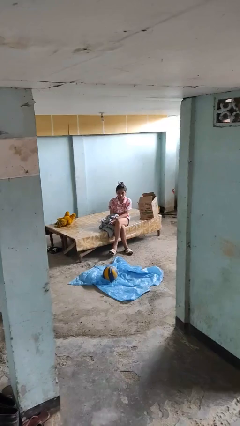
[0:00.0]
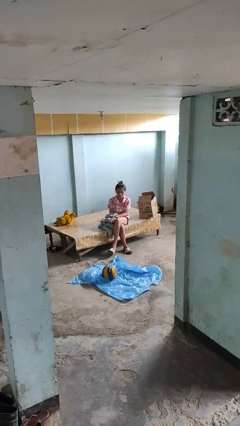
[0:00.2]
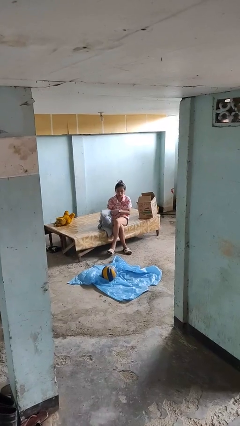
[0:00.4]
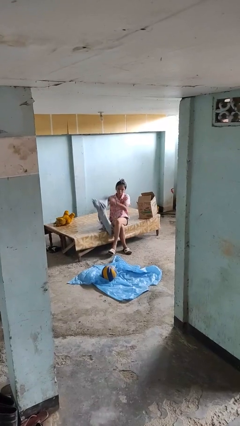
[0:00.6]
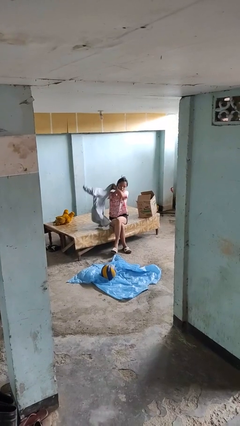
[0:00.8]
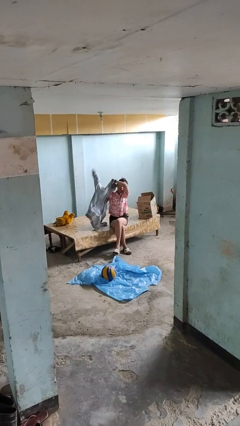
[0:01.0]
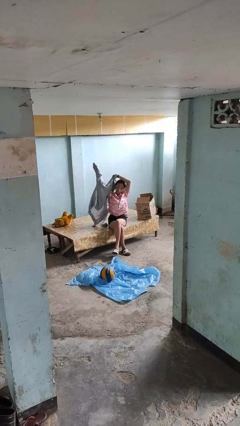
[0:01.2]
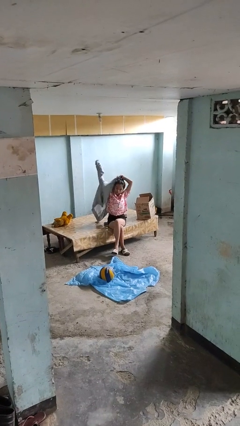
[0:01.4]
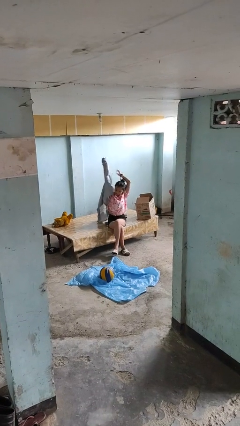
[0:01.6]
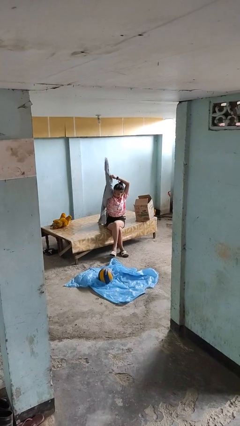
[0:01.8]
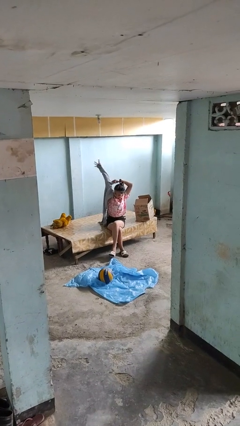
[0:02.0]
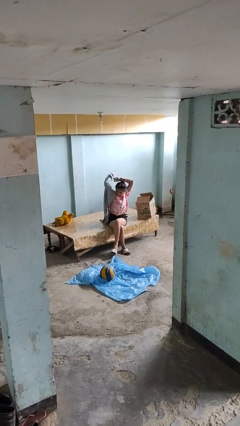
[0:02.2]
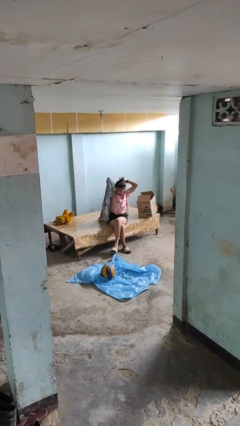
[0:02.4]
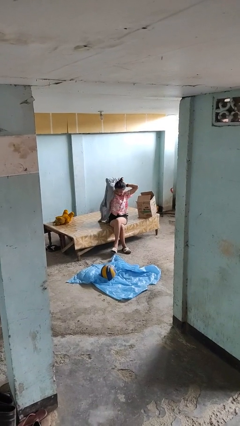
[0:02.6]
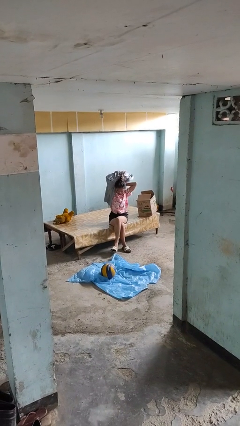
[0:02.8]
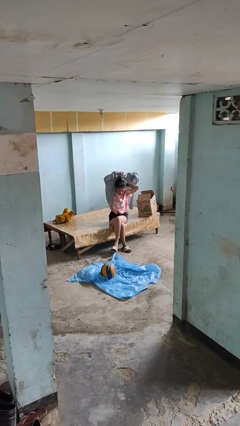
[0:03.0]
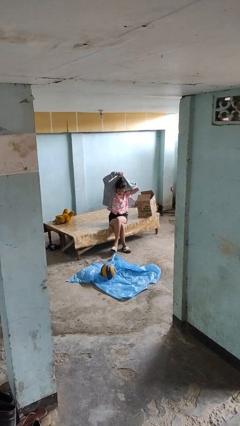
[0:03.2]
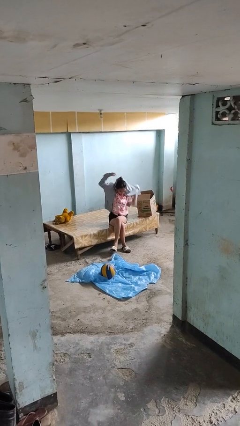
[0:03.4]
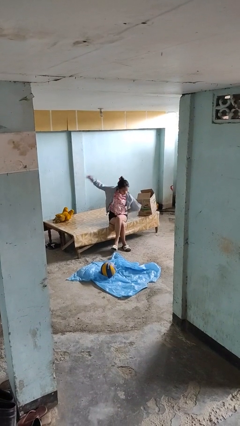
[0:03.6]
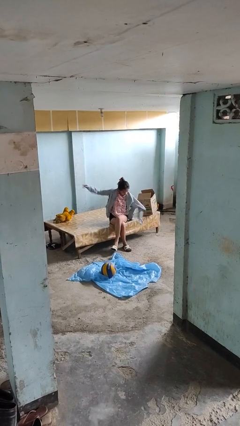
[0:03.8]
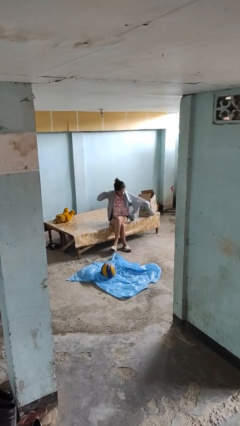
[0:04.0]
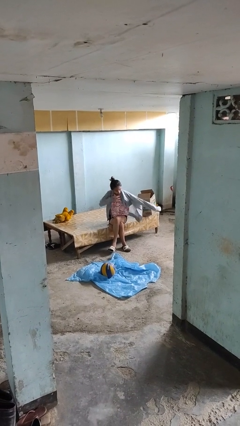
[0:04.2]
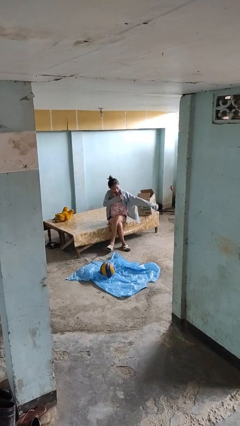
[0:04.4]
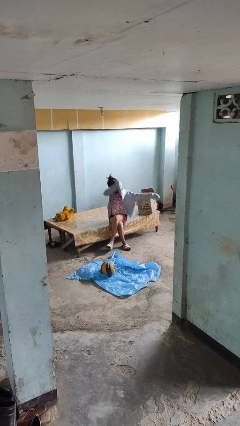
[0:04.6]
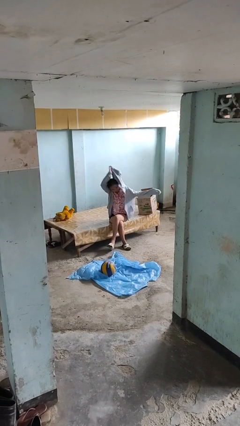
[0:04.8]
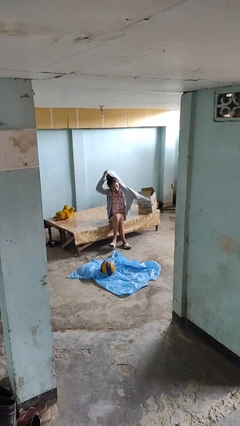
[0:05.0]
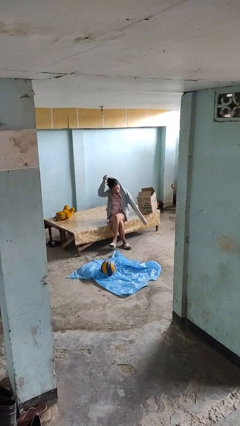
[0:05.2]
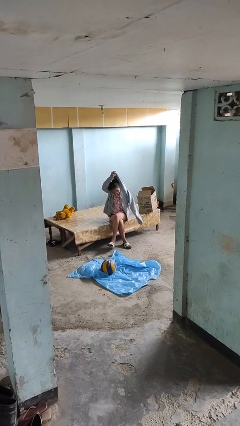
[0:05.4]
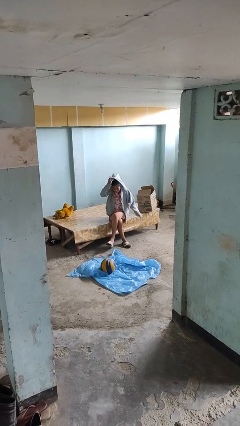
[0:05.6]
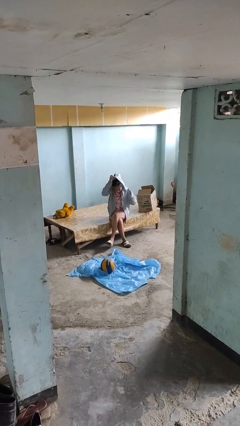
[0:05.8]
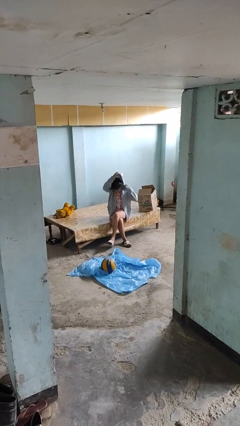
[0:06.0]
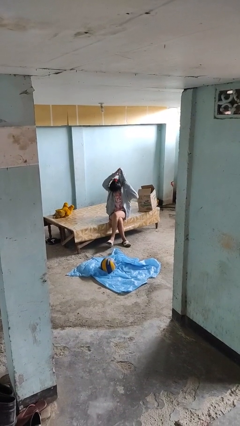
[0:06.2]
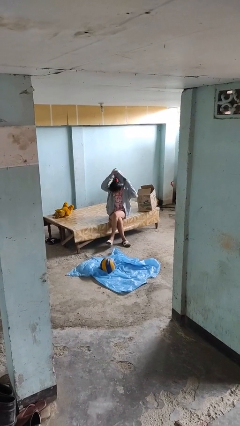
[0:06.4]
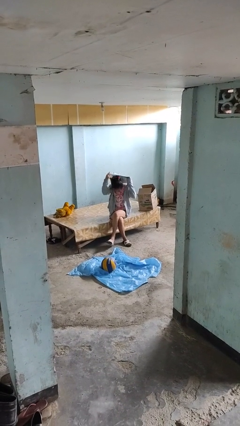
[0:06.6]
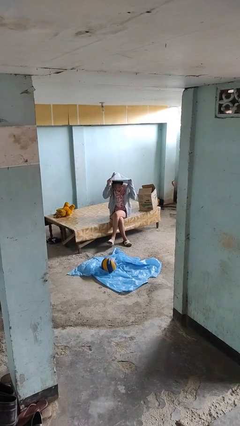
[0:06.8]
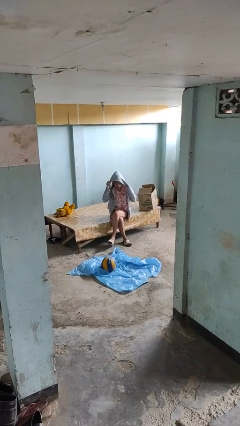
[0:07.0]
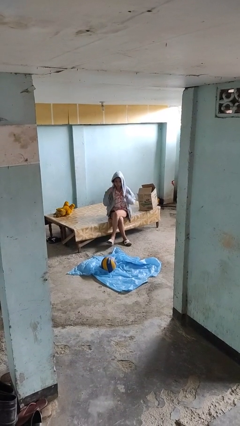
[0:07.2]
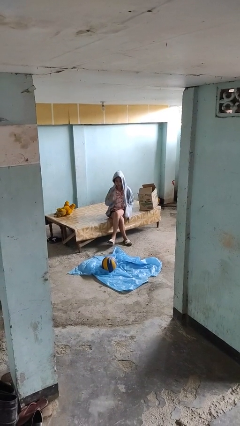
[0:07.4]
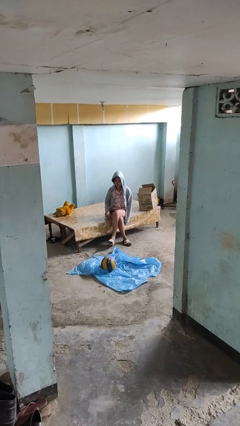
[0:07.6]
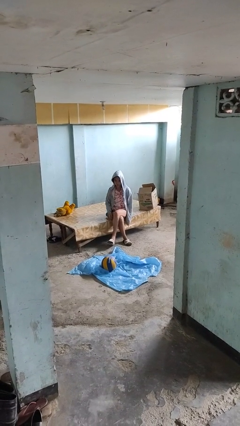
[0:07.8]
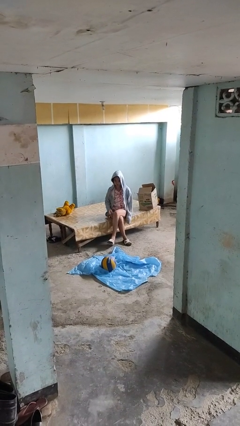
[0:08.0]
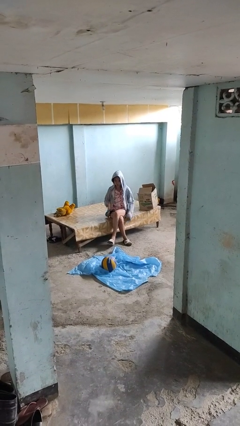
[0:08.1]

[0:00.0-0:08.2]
person puts on hoodie

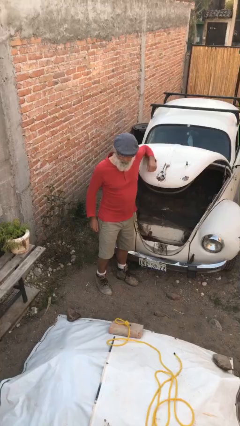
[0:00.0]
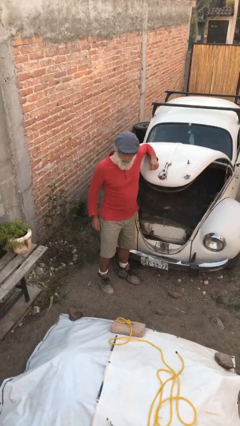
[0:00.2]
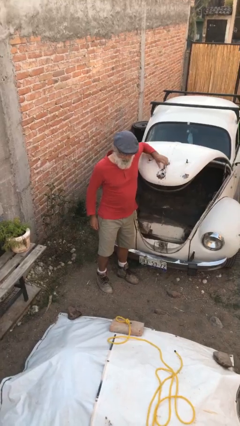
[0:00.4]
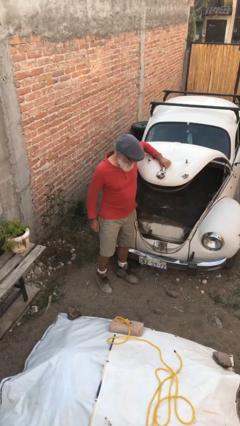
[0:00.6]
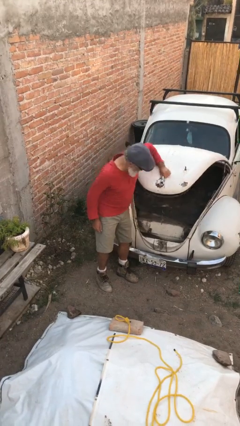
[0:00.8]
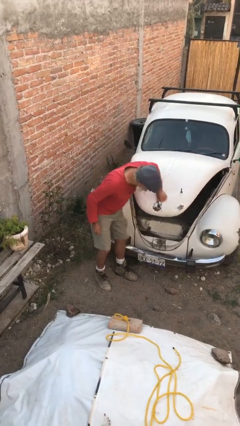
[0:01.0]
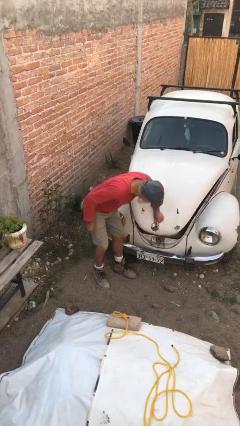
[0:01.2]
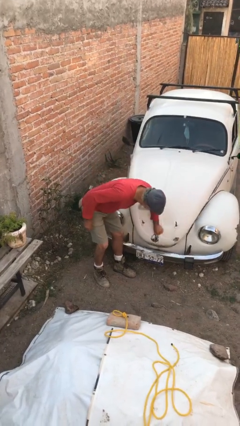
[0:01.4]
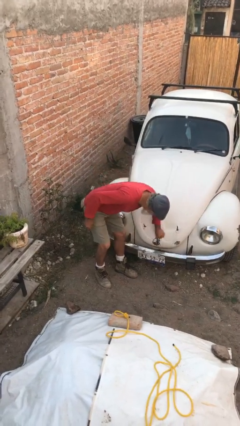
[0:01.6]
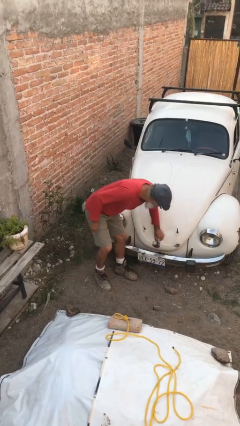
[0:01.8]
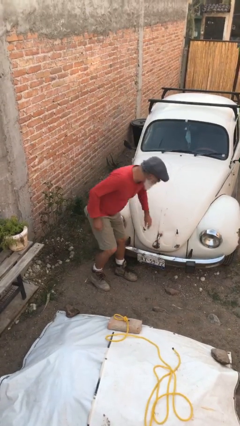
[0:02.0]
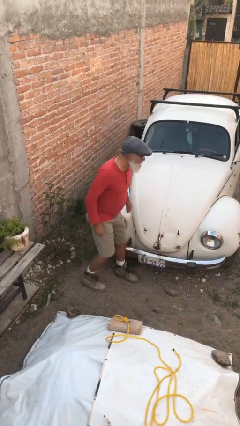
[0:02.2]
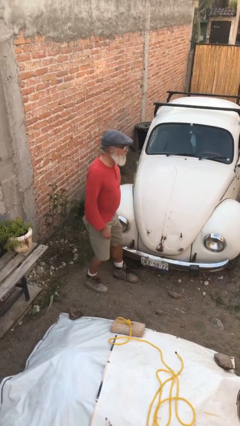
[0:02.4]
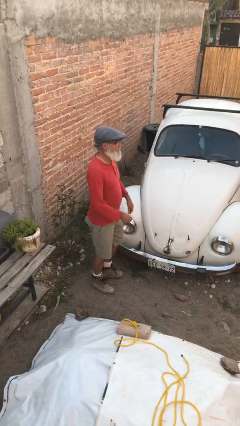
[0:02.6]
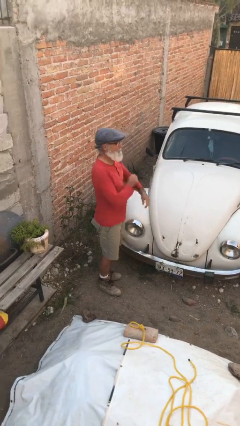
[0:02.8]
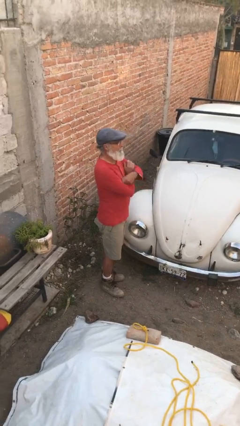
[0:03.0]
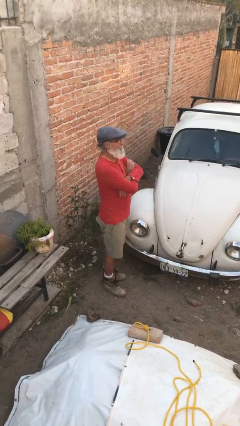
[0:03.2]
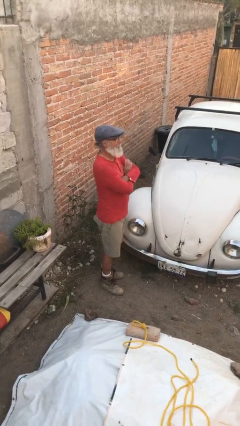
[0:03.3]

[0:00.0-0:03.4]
person closes car trunk

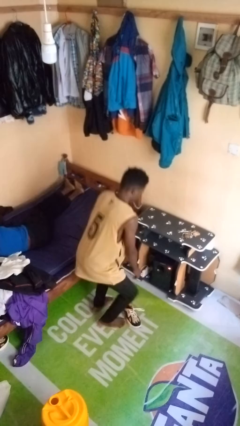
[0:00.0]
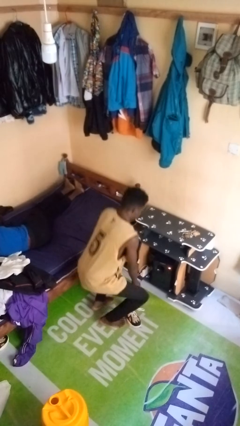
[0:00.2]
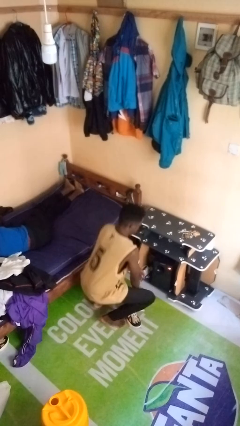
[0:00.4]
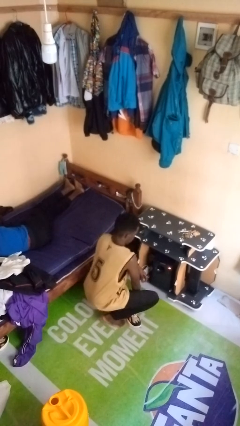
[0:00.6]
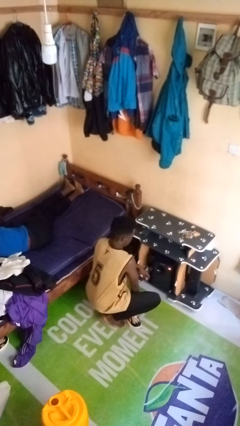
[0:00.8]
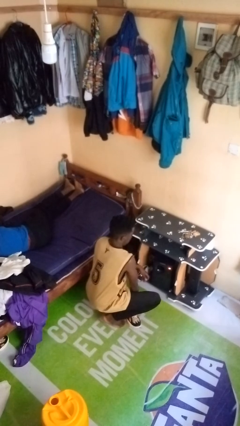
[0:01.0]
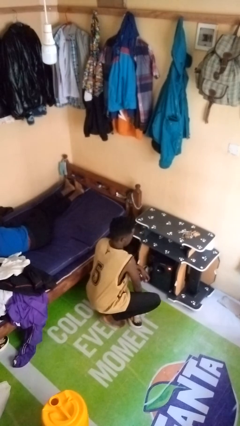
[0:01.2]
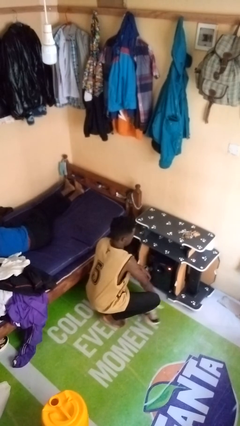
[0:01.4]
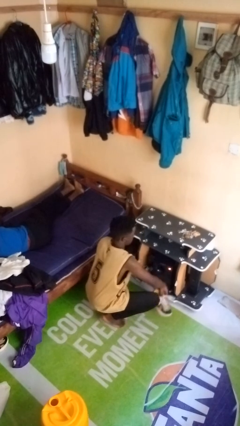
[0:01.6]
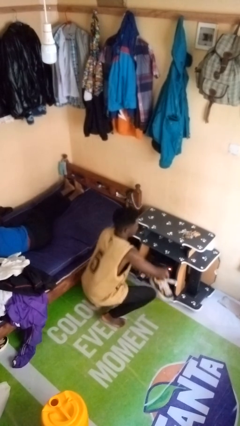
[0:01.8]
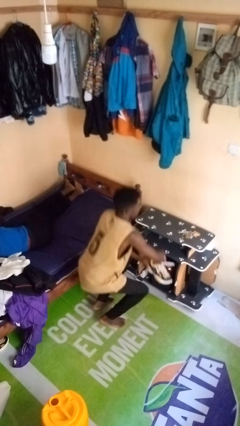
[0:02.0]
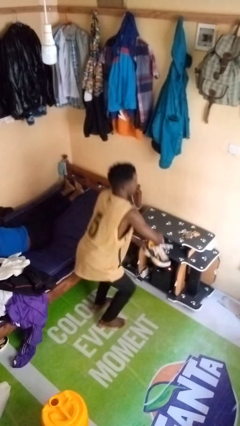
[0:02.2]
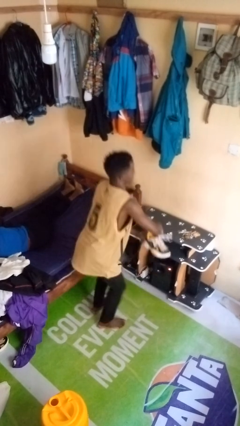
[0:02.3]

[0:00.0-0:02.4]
person picks up object from floor

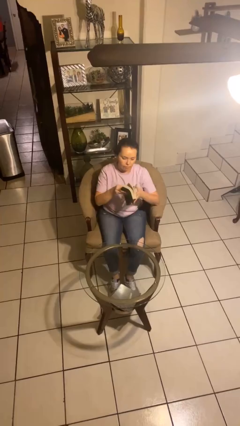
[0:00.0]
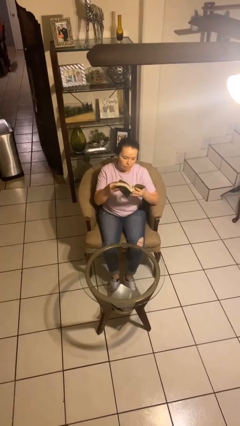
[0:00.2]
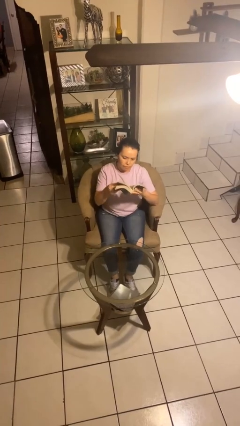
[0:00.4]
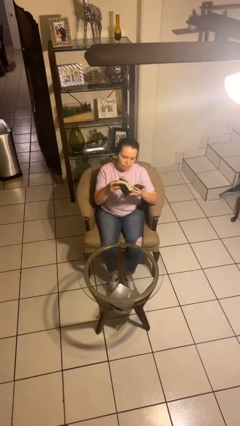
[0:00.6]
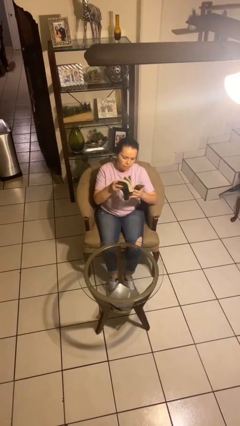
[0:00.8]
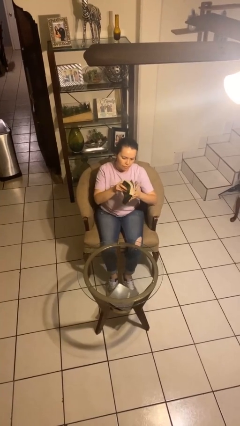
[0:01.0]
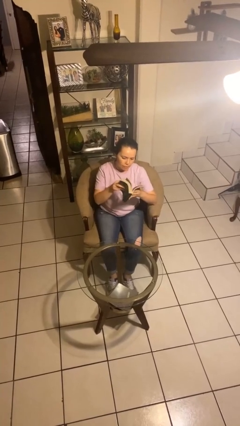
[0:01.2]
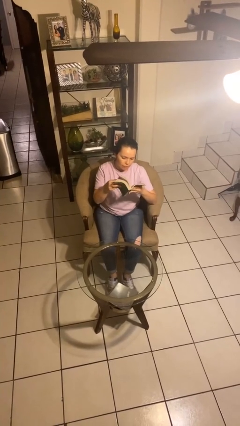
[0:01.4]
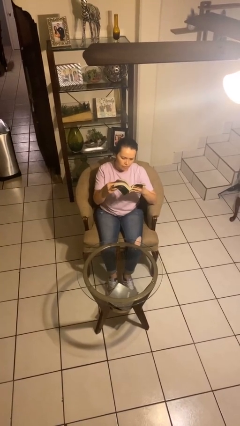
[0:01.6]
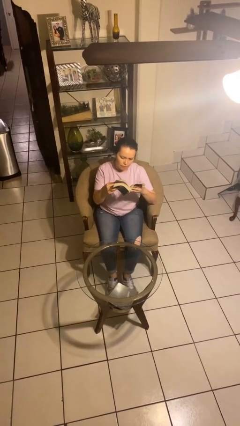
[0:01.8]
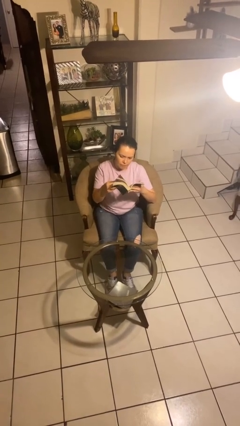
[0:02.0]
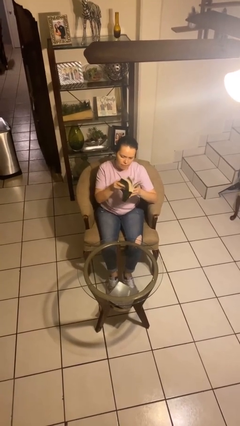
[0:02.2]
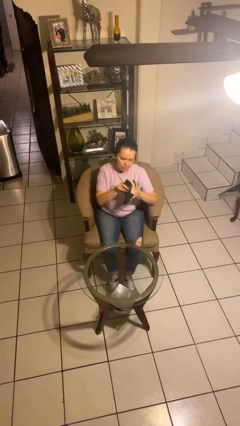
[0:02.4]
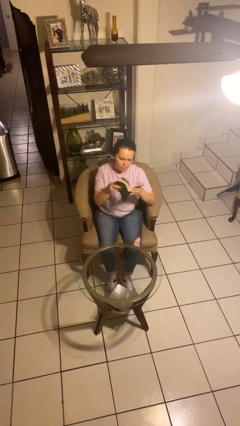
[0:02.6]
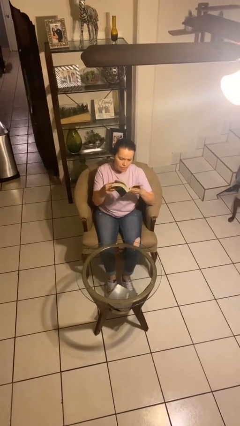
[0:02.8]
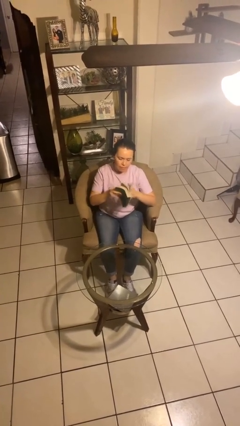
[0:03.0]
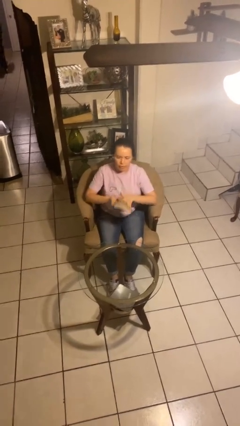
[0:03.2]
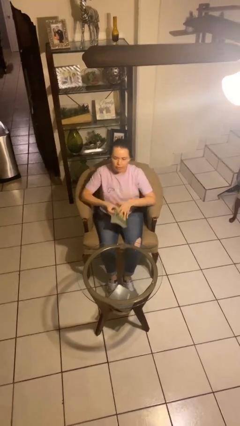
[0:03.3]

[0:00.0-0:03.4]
person reads book

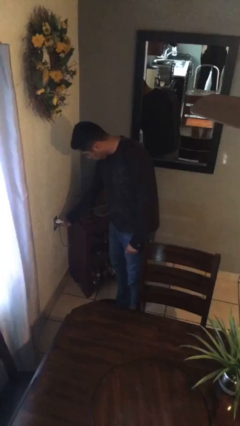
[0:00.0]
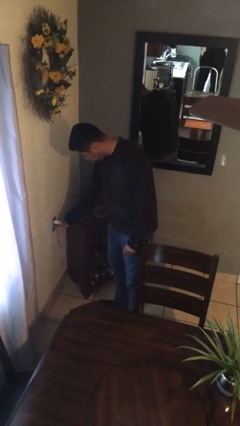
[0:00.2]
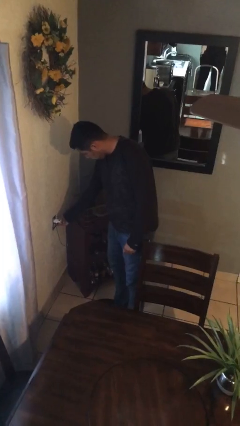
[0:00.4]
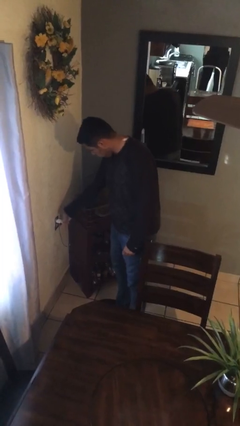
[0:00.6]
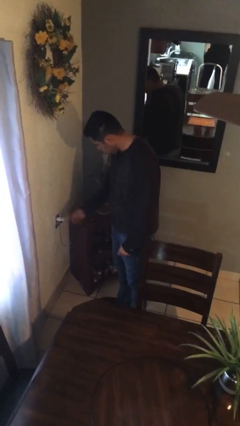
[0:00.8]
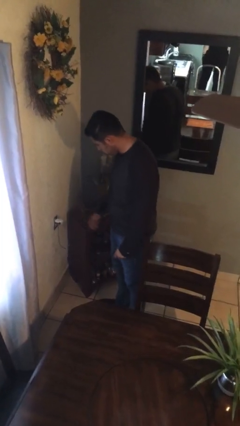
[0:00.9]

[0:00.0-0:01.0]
person pushes wheeled trashcan
